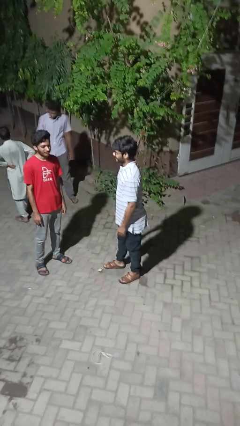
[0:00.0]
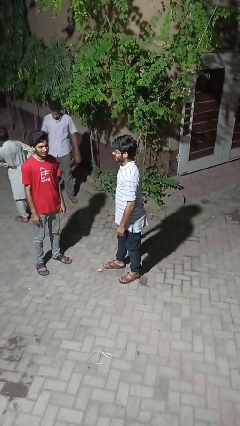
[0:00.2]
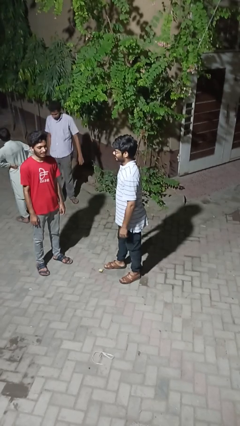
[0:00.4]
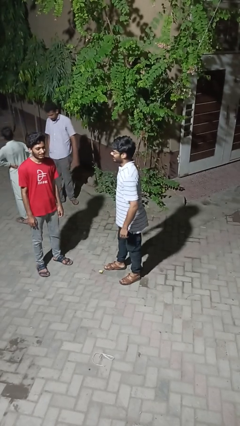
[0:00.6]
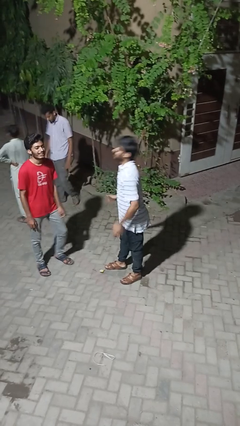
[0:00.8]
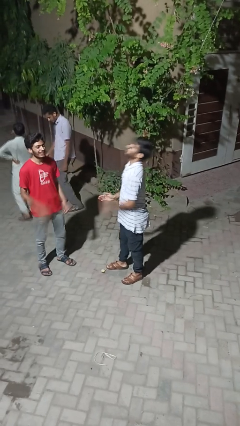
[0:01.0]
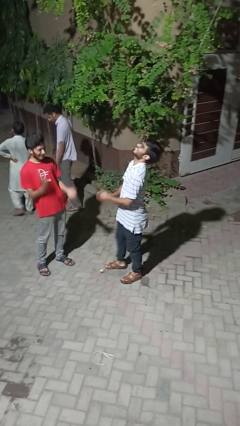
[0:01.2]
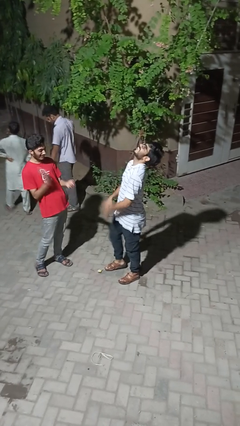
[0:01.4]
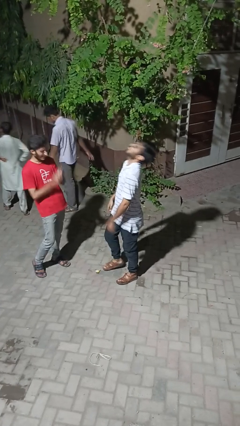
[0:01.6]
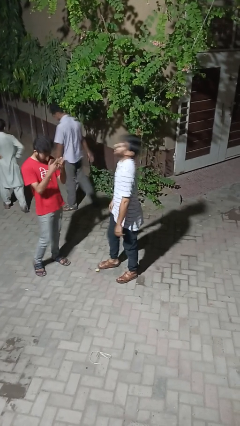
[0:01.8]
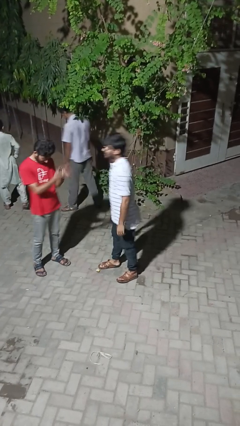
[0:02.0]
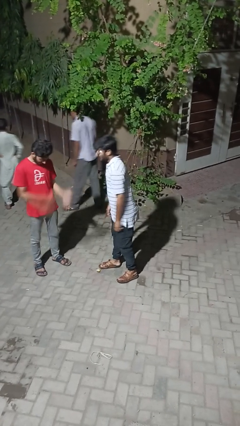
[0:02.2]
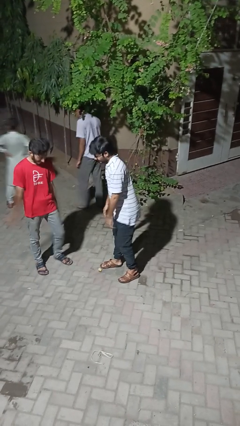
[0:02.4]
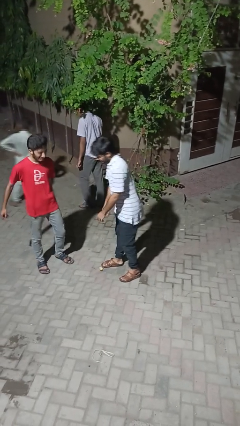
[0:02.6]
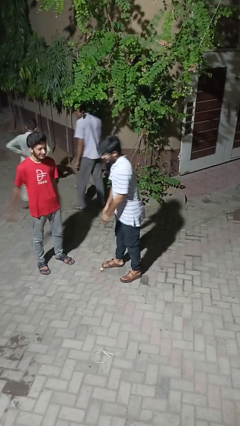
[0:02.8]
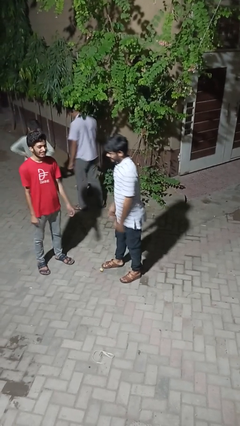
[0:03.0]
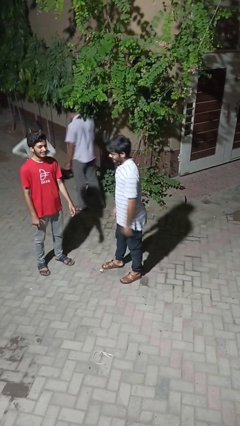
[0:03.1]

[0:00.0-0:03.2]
person laughs with person

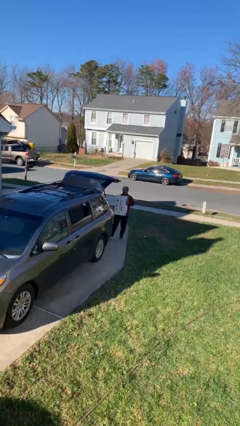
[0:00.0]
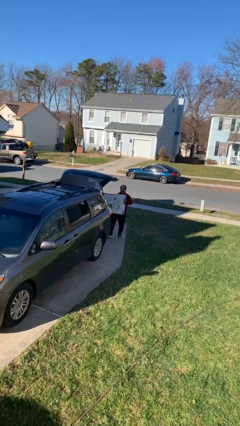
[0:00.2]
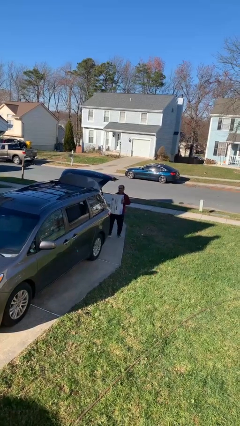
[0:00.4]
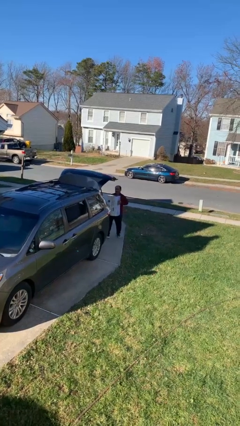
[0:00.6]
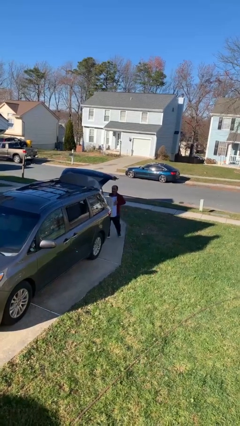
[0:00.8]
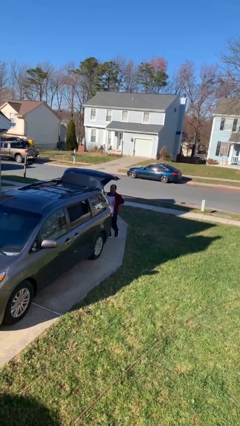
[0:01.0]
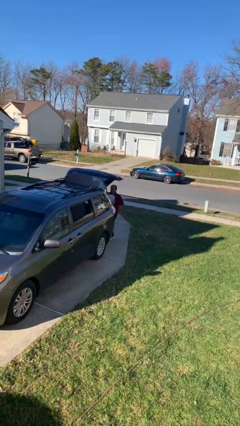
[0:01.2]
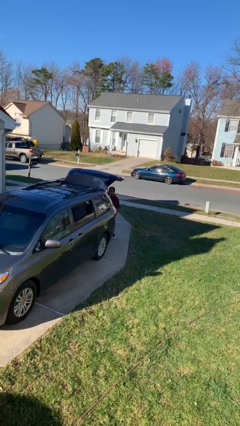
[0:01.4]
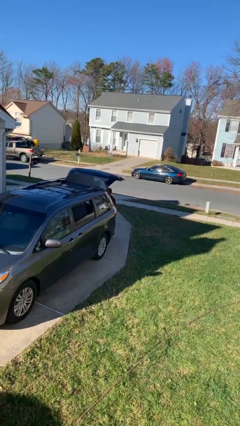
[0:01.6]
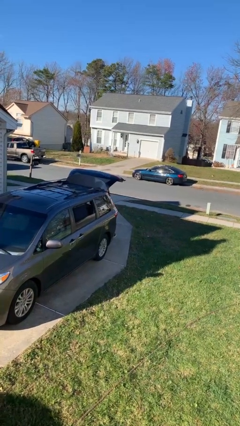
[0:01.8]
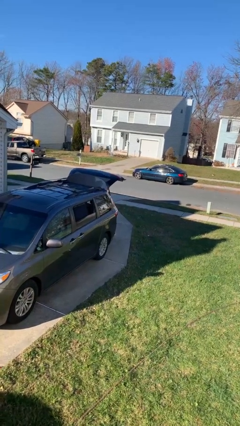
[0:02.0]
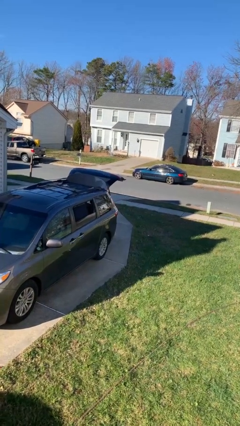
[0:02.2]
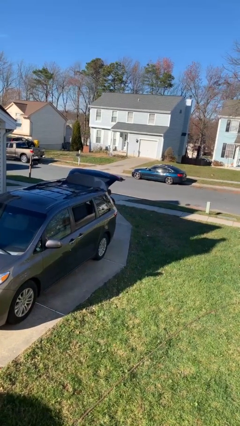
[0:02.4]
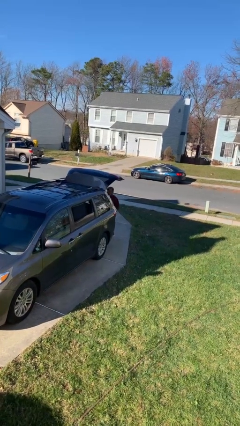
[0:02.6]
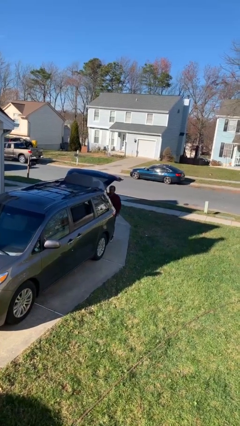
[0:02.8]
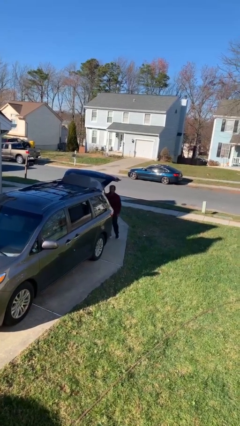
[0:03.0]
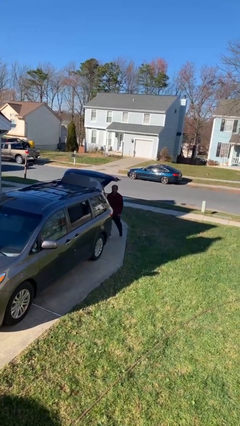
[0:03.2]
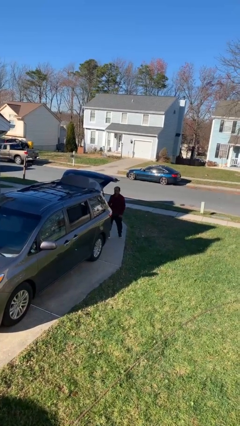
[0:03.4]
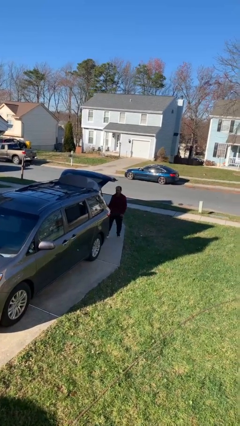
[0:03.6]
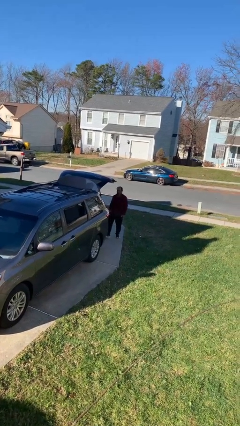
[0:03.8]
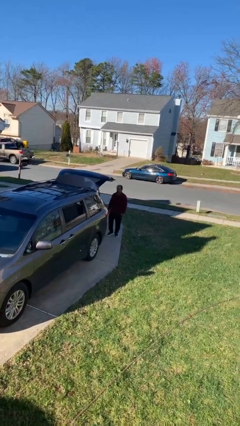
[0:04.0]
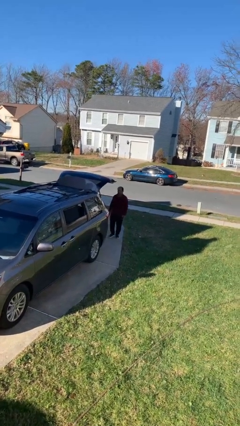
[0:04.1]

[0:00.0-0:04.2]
person loads car

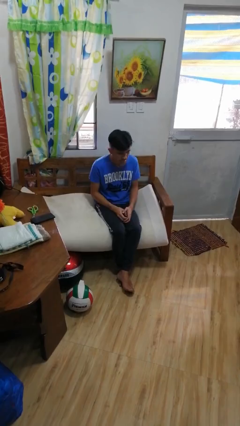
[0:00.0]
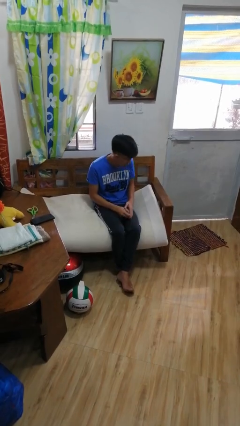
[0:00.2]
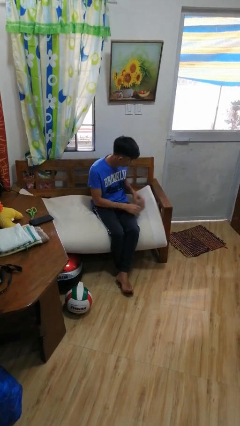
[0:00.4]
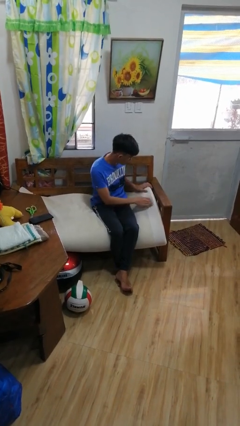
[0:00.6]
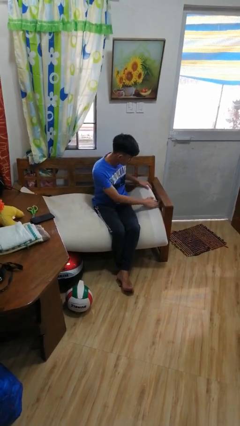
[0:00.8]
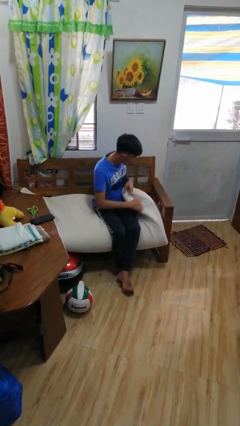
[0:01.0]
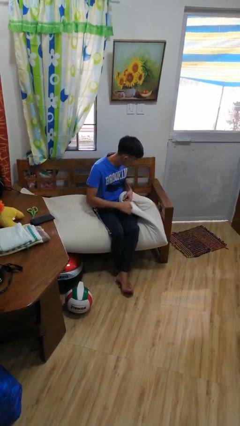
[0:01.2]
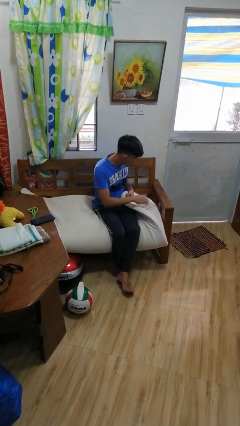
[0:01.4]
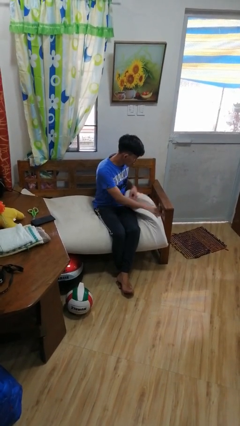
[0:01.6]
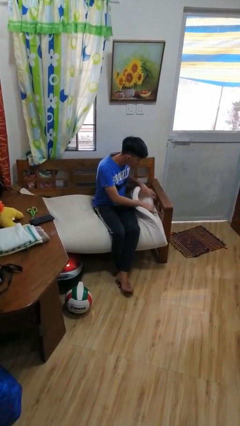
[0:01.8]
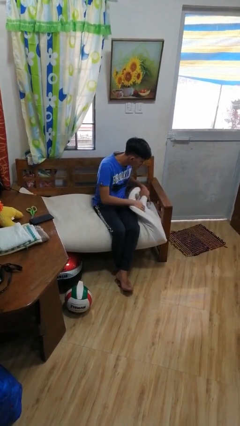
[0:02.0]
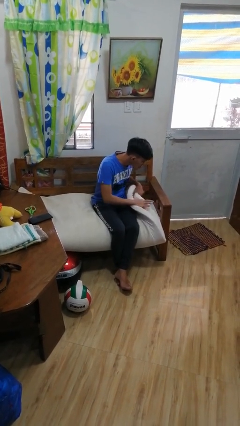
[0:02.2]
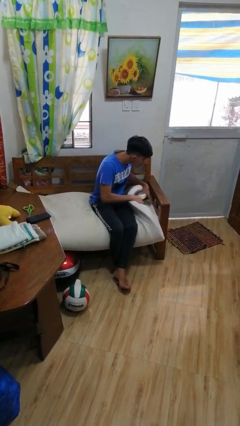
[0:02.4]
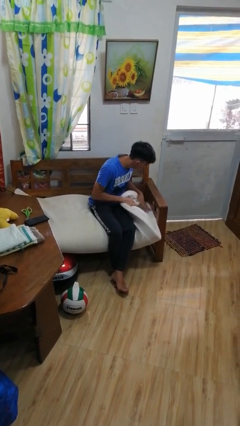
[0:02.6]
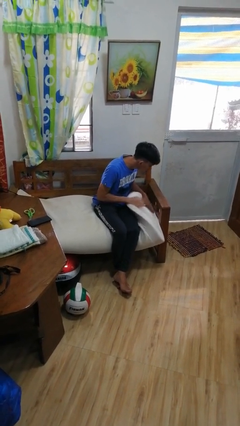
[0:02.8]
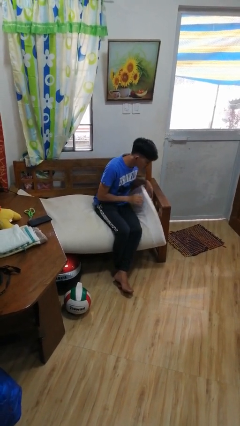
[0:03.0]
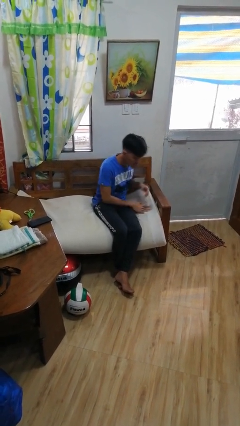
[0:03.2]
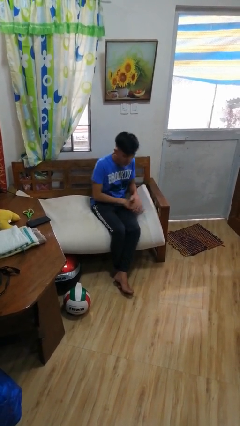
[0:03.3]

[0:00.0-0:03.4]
person searches in couch

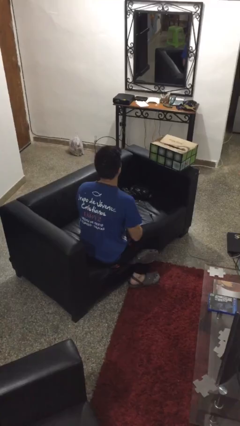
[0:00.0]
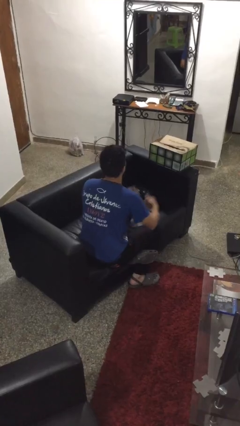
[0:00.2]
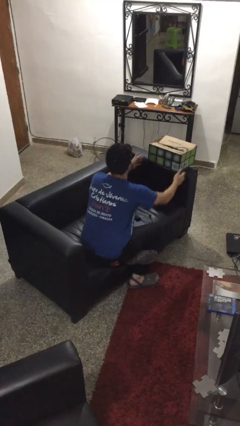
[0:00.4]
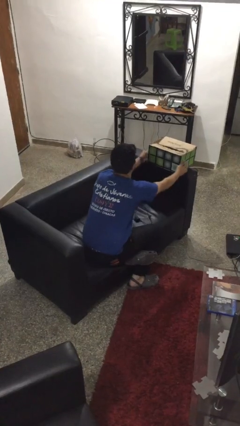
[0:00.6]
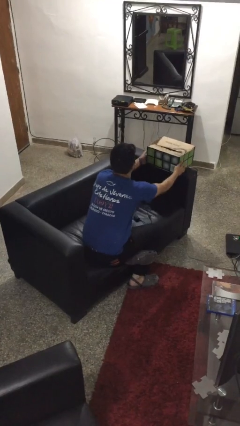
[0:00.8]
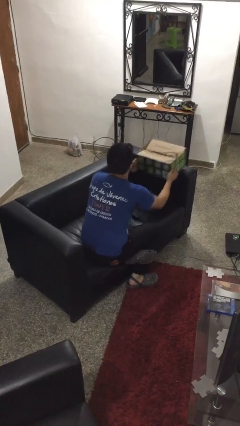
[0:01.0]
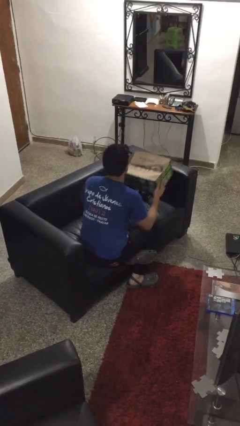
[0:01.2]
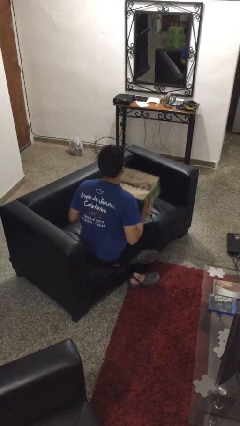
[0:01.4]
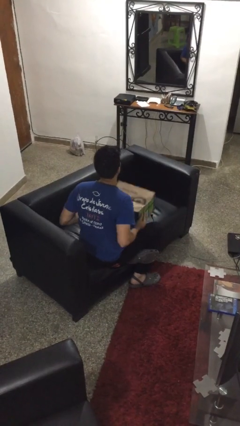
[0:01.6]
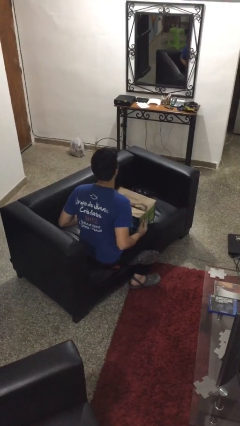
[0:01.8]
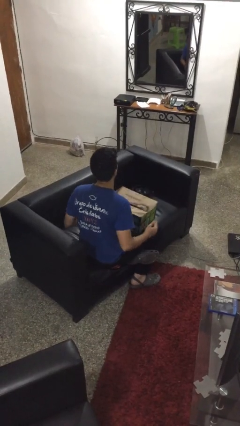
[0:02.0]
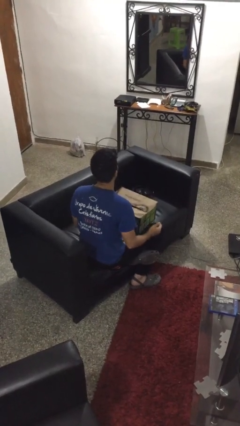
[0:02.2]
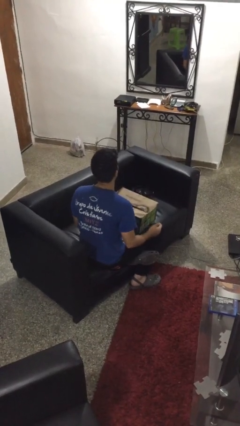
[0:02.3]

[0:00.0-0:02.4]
person picks up object from couch

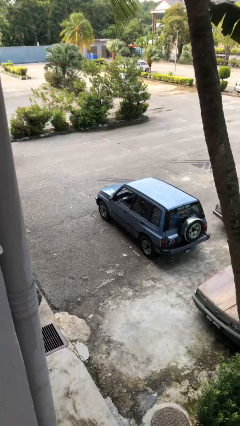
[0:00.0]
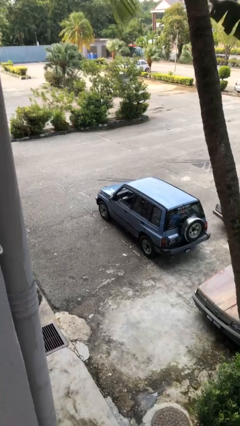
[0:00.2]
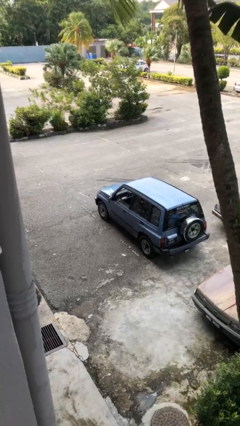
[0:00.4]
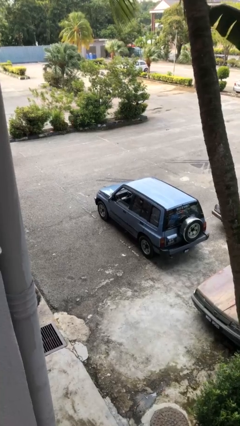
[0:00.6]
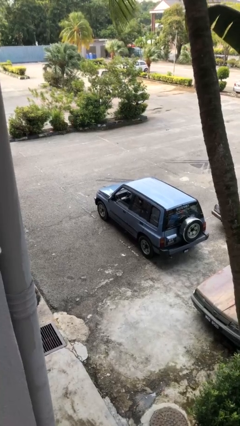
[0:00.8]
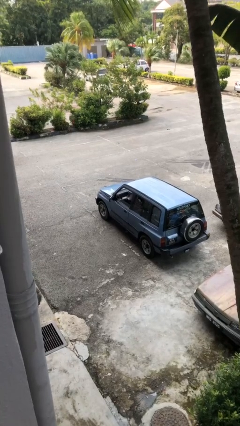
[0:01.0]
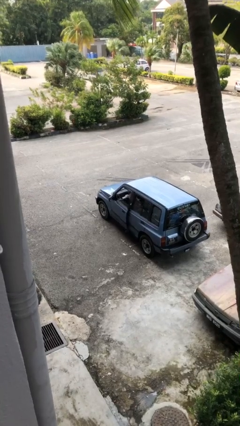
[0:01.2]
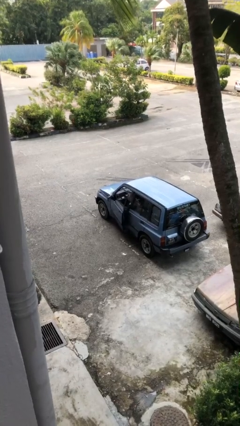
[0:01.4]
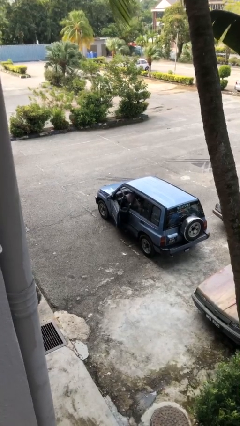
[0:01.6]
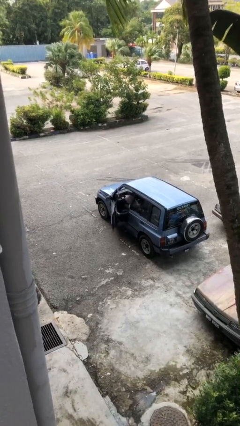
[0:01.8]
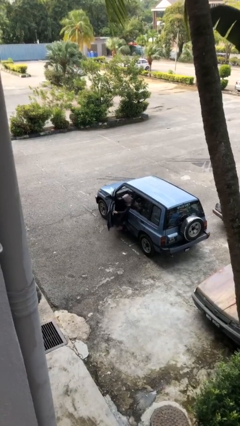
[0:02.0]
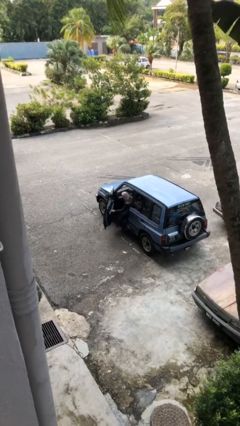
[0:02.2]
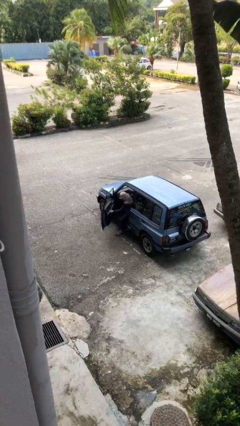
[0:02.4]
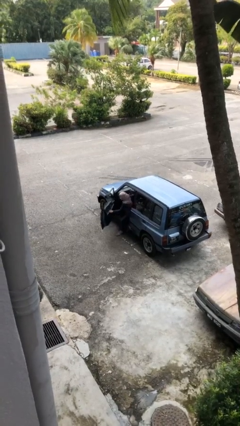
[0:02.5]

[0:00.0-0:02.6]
person opens car door

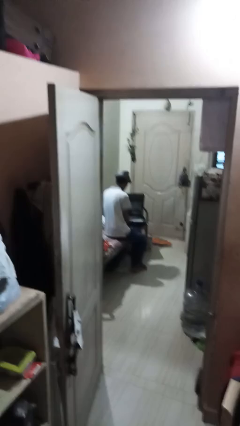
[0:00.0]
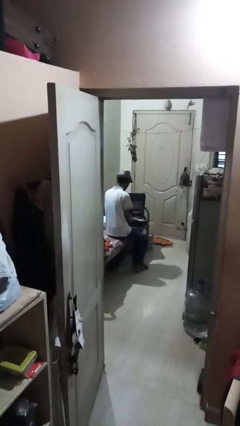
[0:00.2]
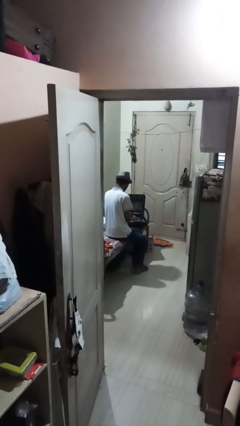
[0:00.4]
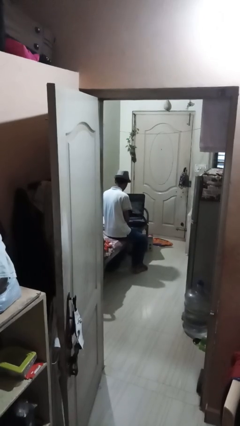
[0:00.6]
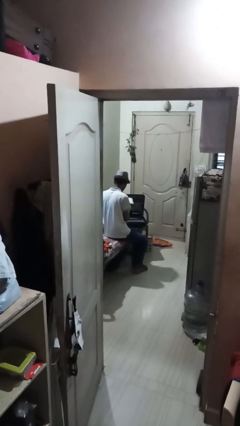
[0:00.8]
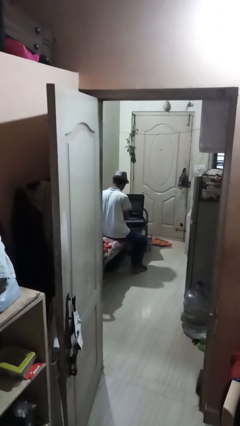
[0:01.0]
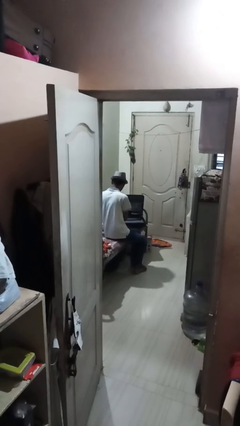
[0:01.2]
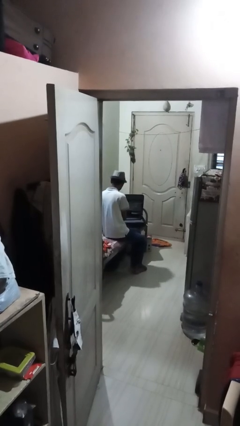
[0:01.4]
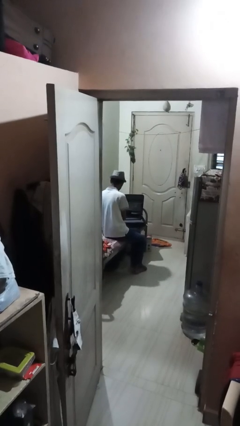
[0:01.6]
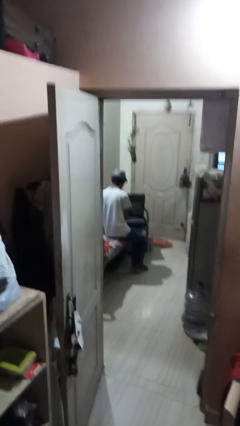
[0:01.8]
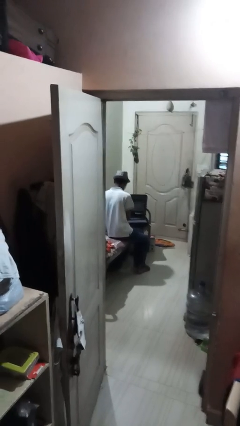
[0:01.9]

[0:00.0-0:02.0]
person unloads clothes from suitcase
